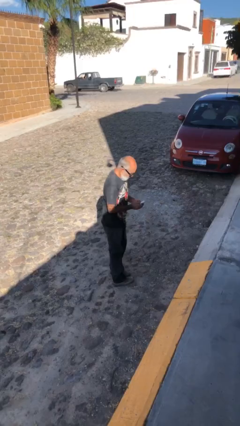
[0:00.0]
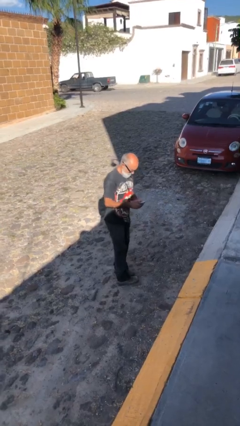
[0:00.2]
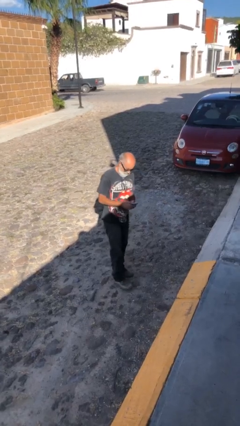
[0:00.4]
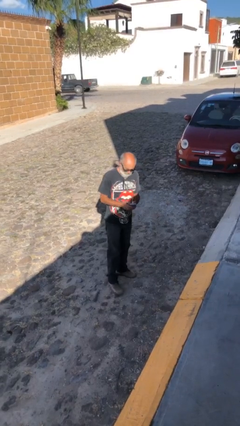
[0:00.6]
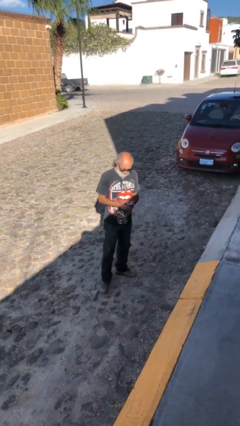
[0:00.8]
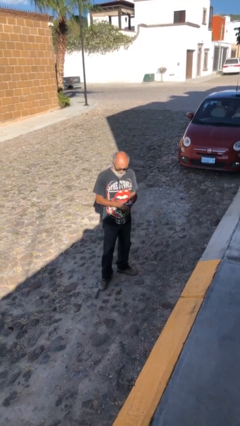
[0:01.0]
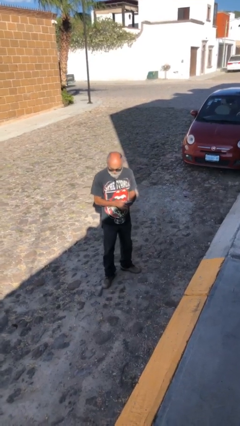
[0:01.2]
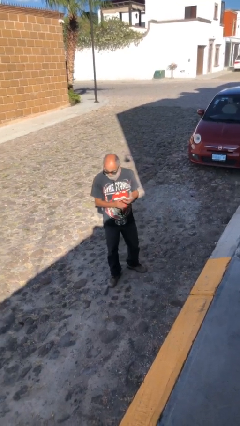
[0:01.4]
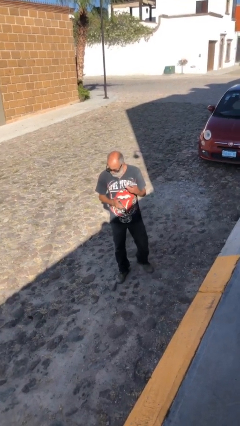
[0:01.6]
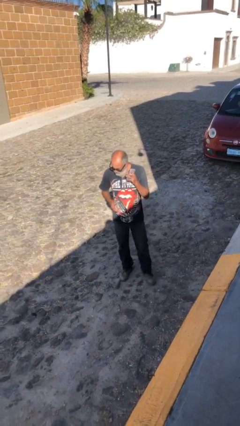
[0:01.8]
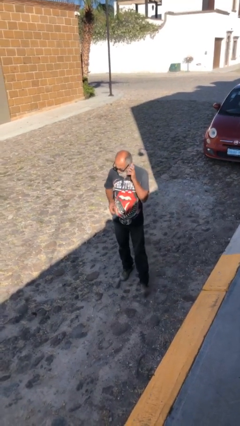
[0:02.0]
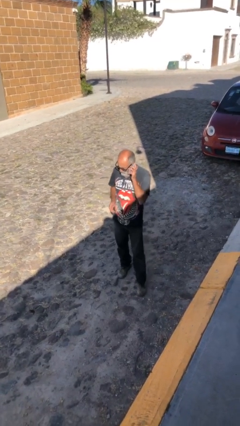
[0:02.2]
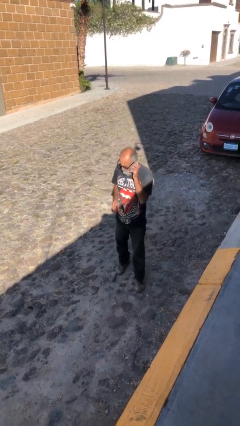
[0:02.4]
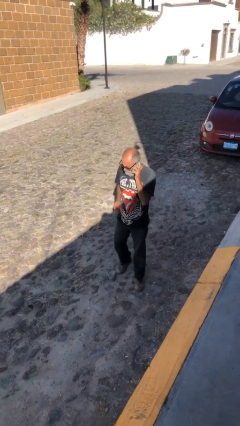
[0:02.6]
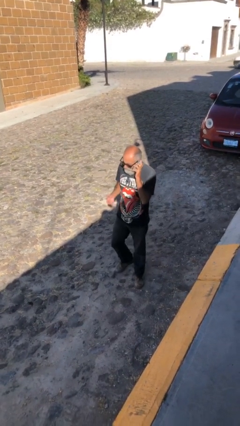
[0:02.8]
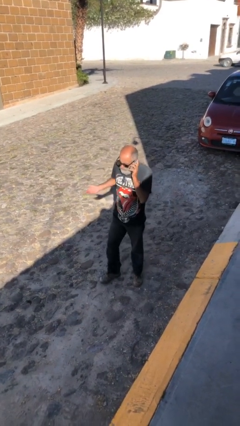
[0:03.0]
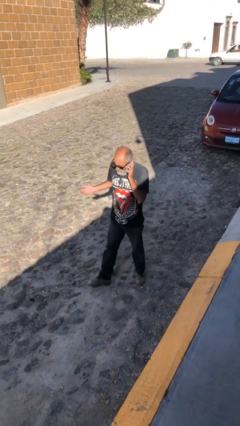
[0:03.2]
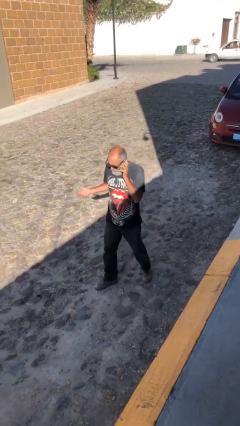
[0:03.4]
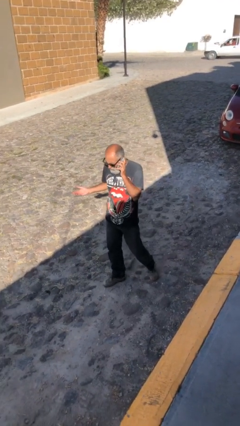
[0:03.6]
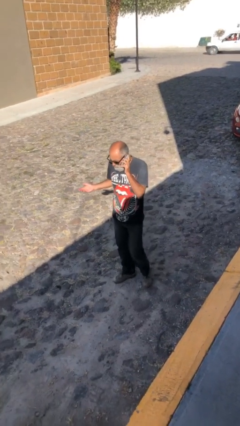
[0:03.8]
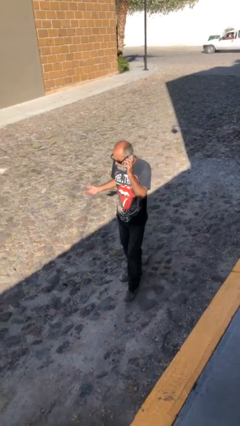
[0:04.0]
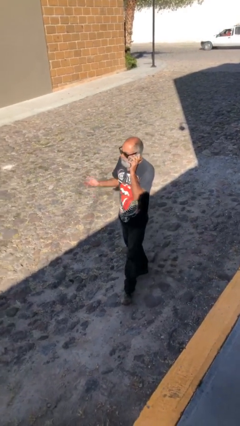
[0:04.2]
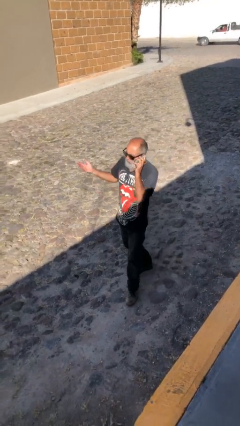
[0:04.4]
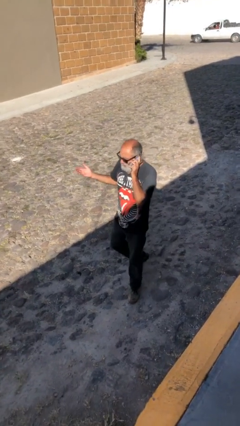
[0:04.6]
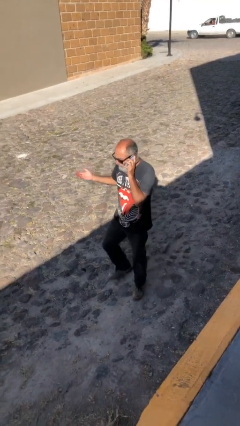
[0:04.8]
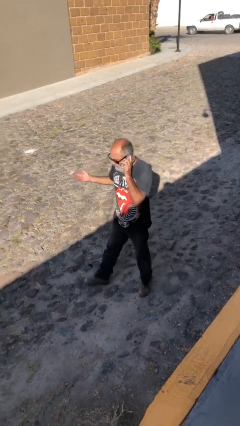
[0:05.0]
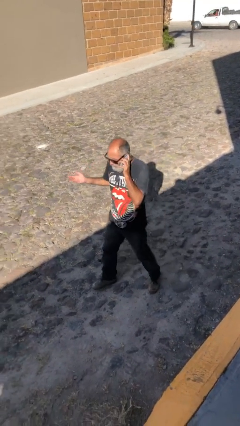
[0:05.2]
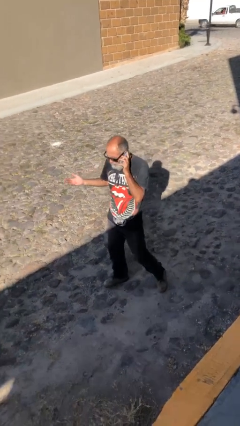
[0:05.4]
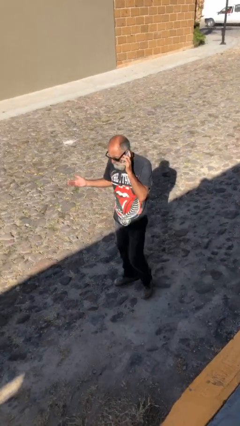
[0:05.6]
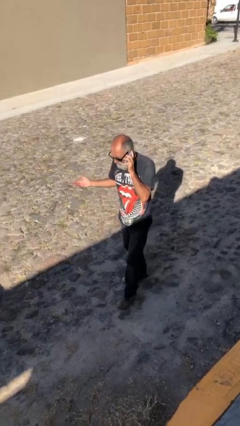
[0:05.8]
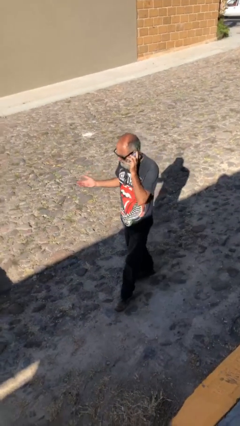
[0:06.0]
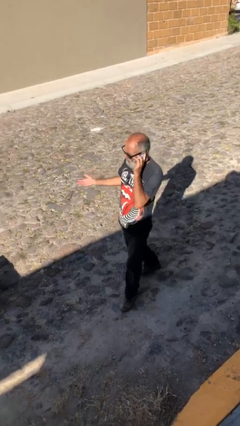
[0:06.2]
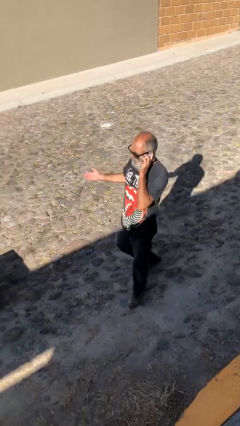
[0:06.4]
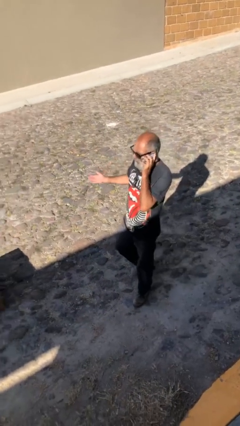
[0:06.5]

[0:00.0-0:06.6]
person talks on phone

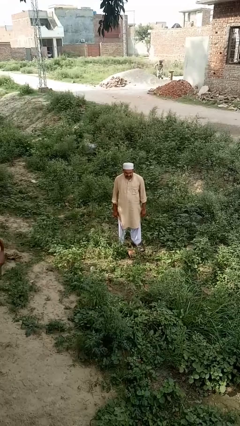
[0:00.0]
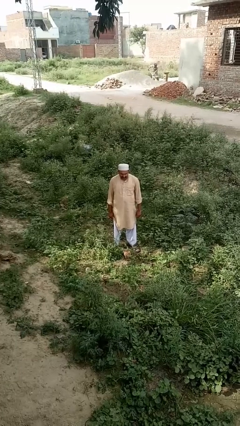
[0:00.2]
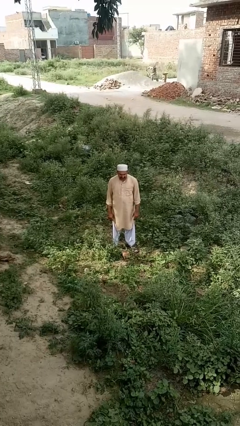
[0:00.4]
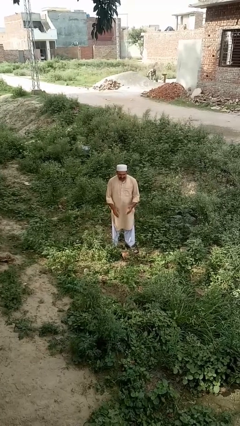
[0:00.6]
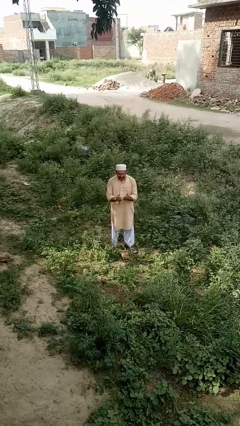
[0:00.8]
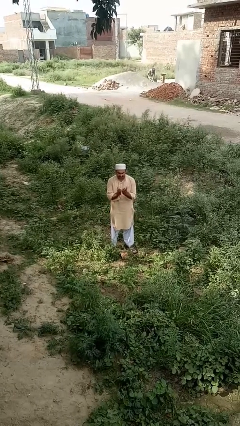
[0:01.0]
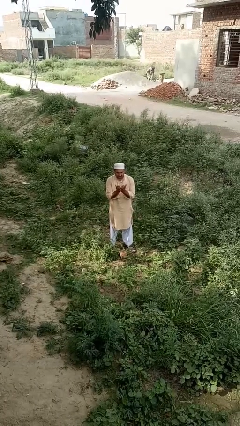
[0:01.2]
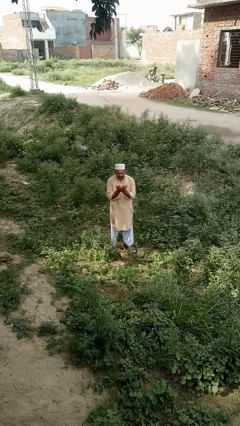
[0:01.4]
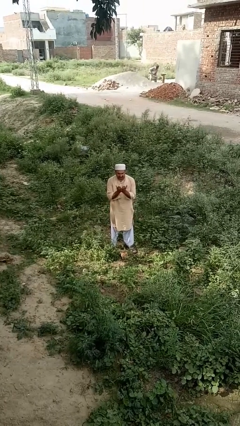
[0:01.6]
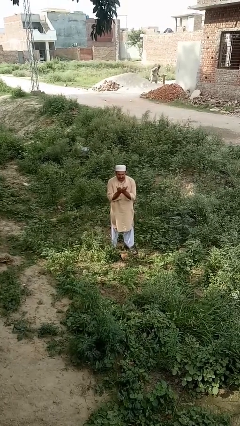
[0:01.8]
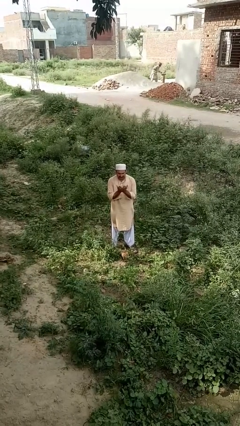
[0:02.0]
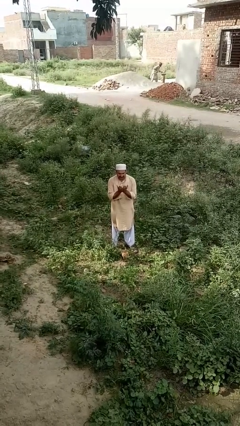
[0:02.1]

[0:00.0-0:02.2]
person prays

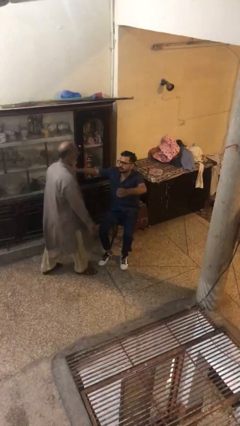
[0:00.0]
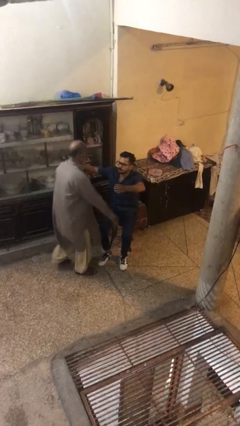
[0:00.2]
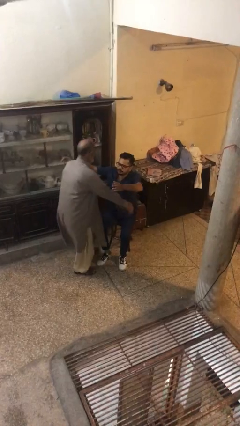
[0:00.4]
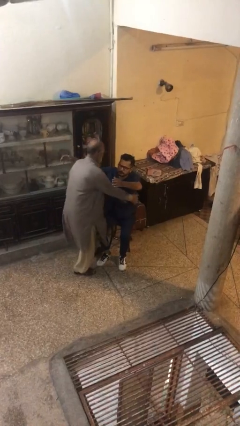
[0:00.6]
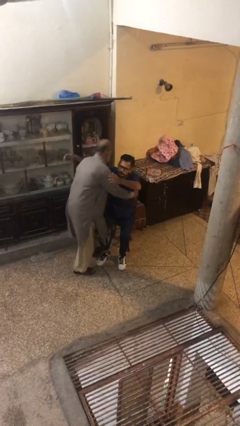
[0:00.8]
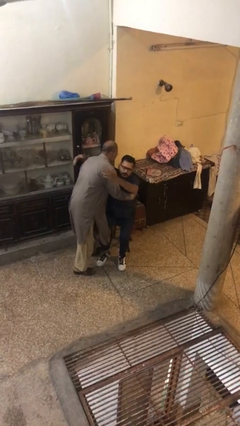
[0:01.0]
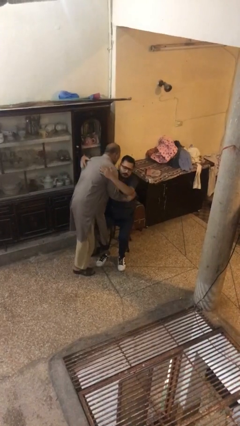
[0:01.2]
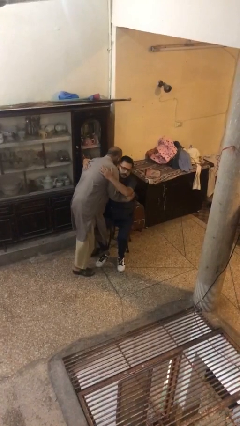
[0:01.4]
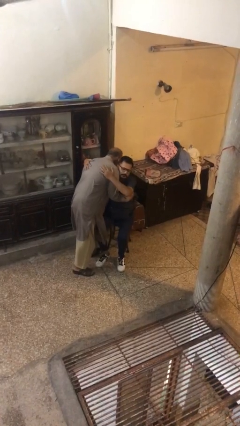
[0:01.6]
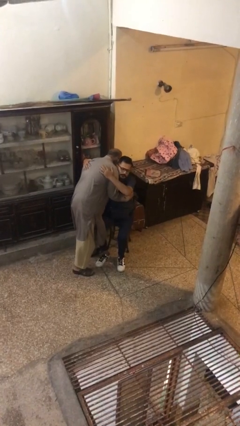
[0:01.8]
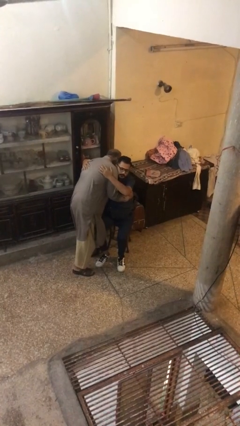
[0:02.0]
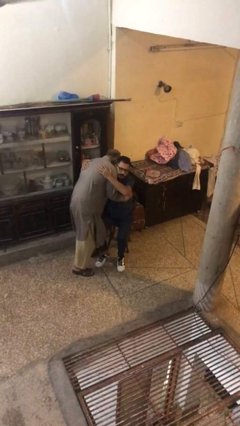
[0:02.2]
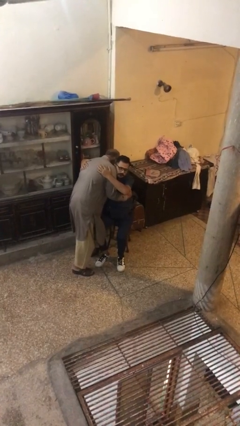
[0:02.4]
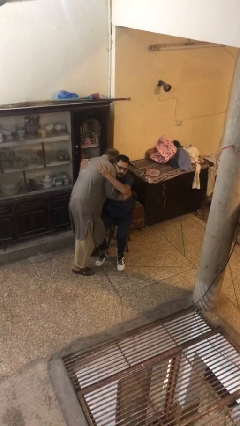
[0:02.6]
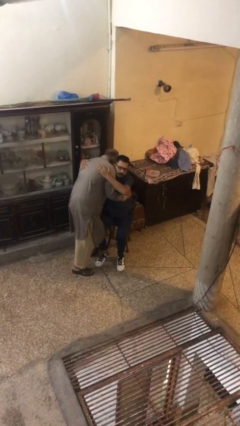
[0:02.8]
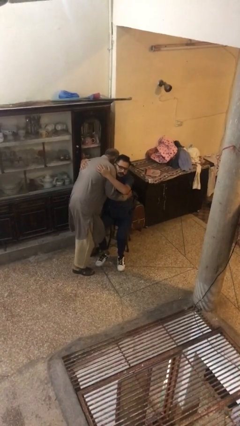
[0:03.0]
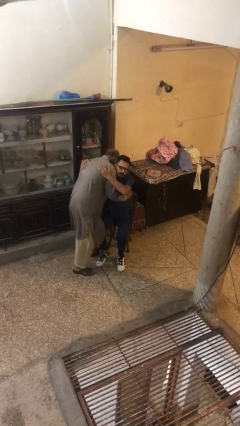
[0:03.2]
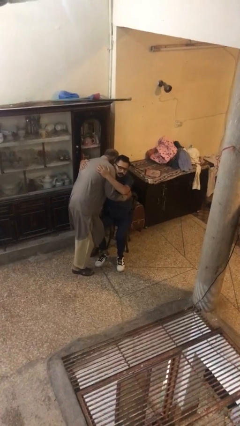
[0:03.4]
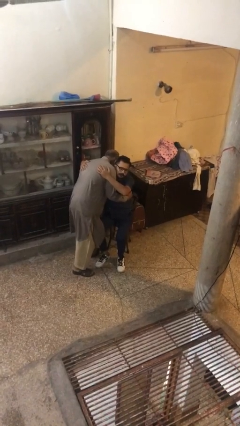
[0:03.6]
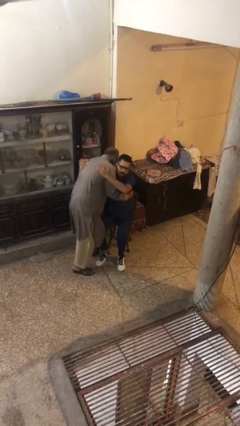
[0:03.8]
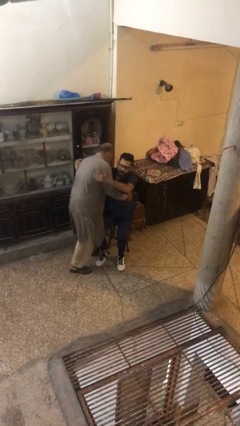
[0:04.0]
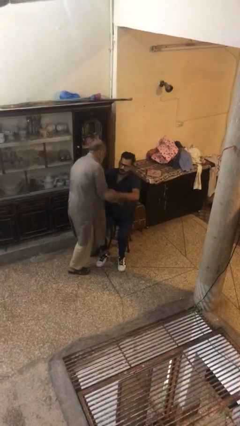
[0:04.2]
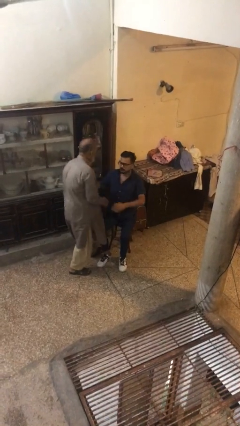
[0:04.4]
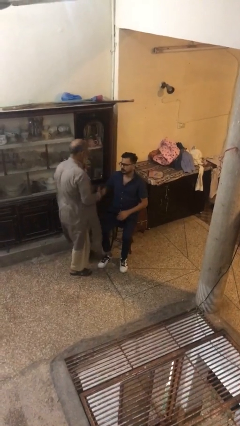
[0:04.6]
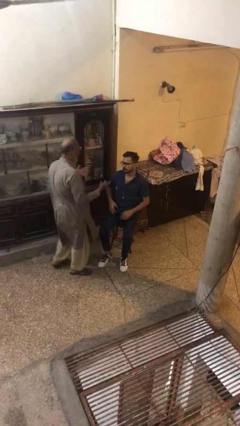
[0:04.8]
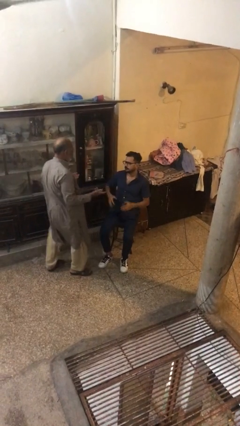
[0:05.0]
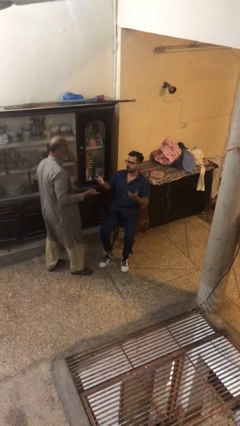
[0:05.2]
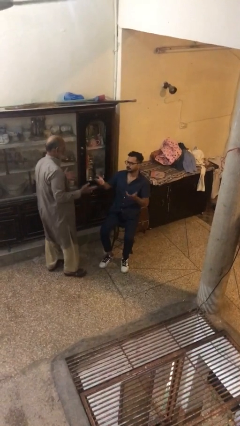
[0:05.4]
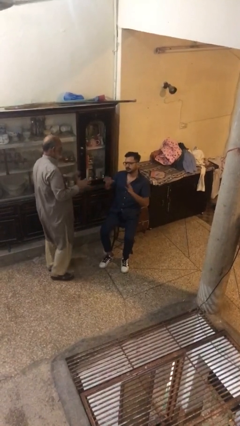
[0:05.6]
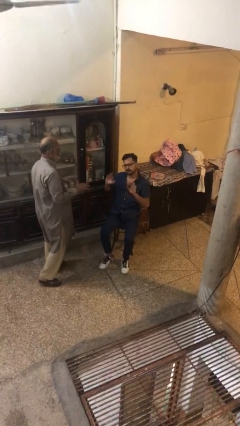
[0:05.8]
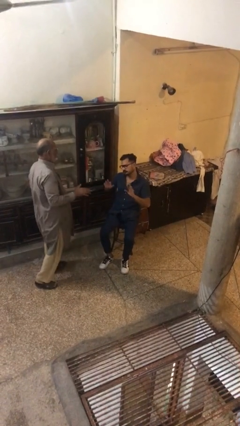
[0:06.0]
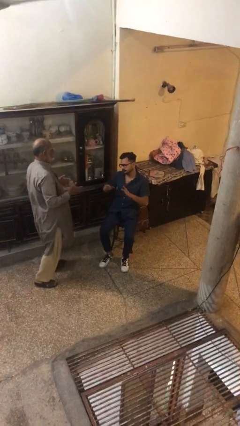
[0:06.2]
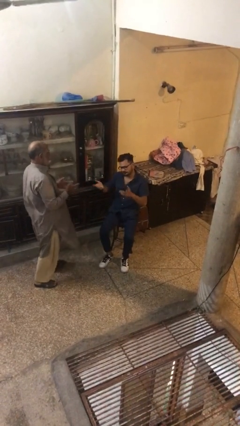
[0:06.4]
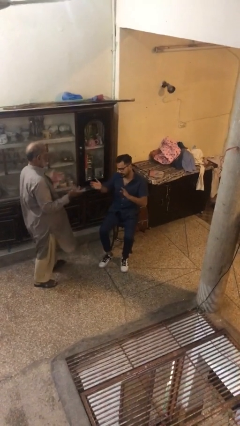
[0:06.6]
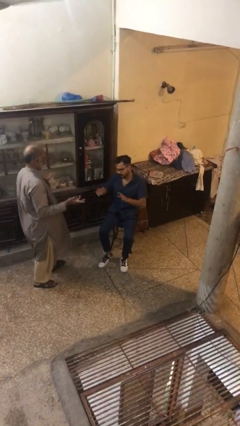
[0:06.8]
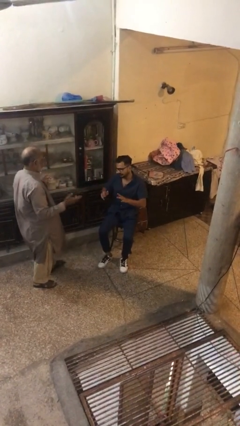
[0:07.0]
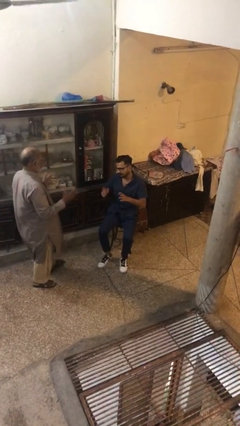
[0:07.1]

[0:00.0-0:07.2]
person embraces person

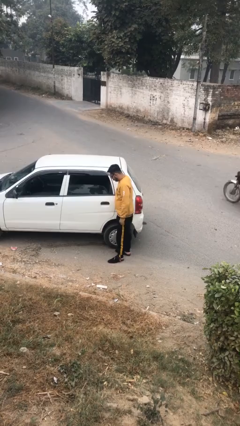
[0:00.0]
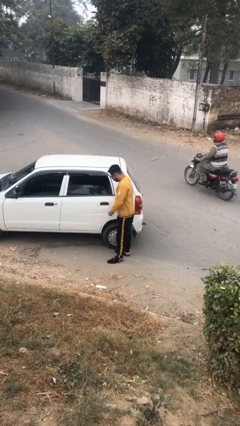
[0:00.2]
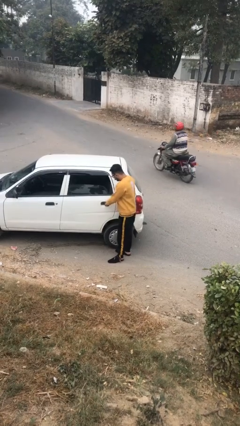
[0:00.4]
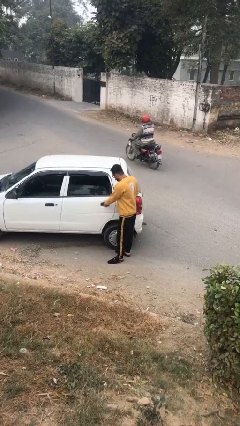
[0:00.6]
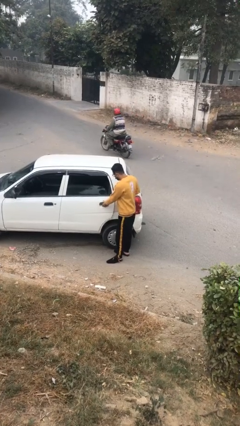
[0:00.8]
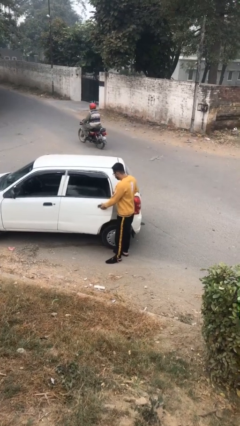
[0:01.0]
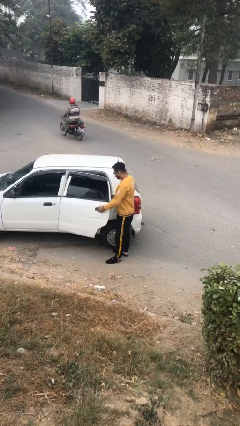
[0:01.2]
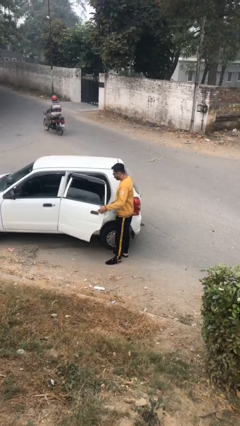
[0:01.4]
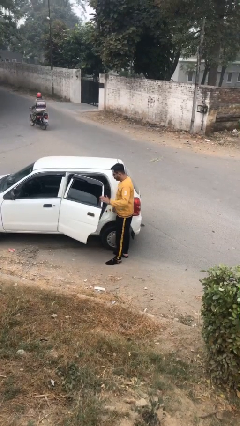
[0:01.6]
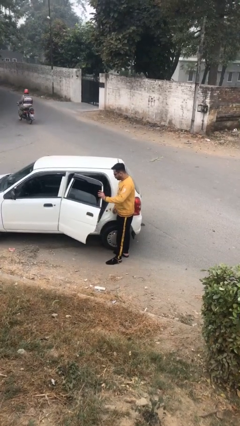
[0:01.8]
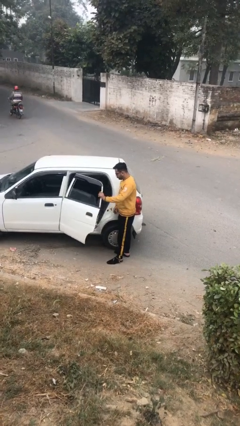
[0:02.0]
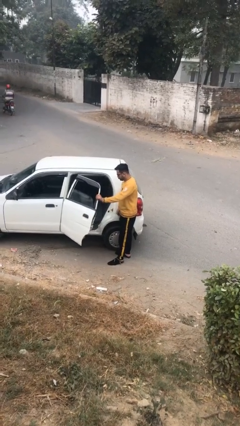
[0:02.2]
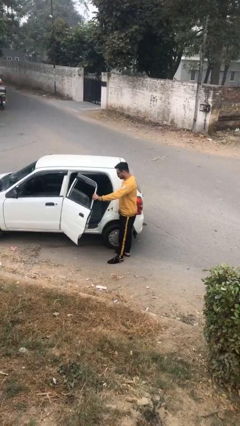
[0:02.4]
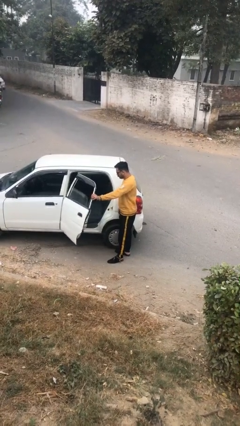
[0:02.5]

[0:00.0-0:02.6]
person opens car door
